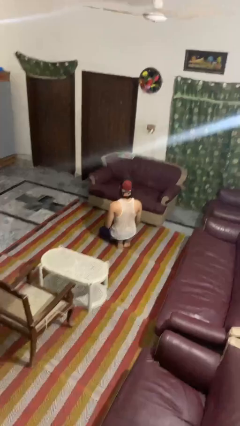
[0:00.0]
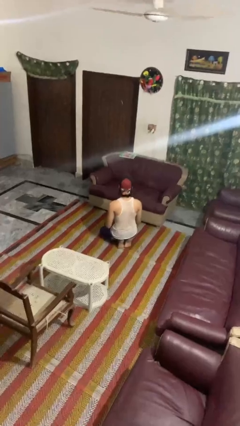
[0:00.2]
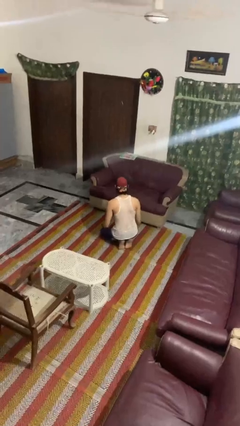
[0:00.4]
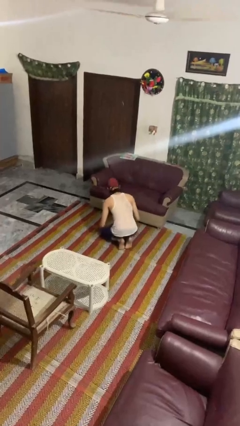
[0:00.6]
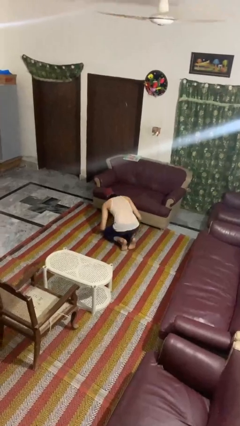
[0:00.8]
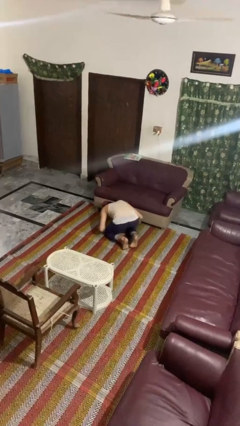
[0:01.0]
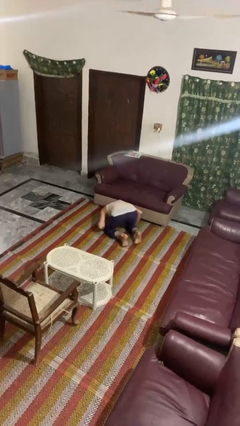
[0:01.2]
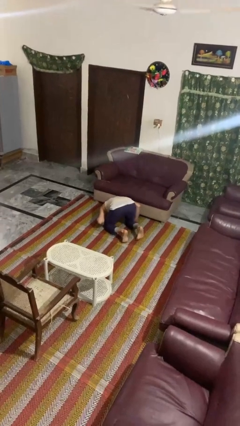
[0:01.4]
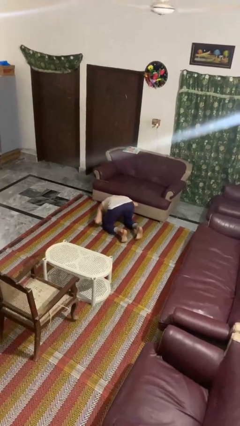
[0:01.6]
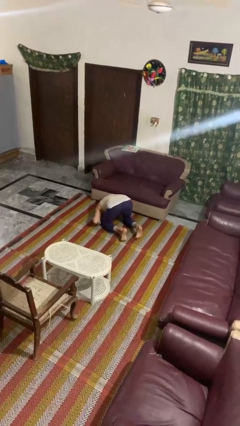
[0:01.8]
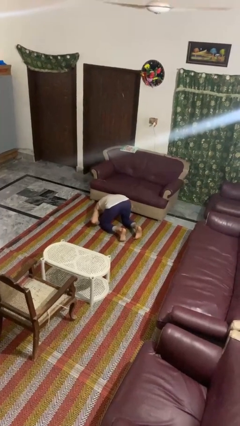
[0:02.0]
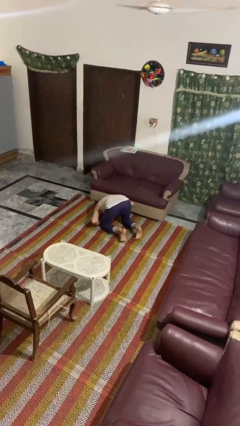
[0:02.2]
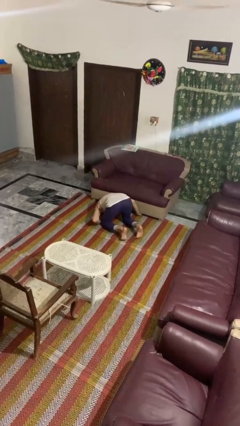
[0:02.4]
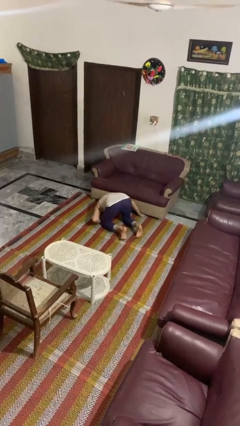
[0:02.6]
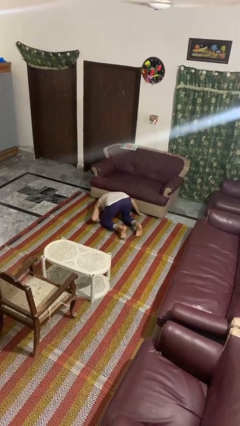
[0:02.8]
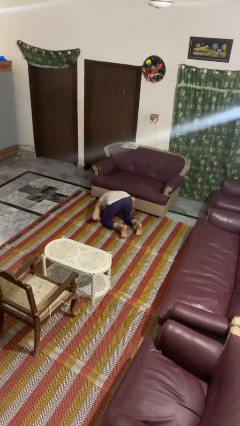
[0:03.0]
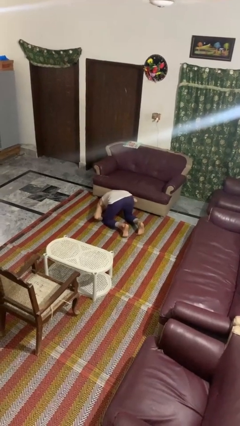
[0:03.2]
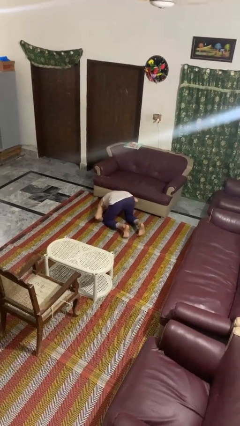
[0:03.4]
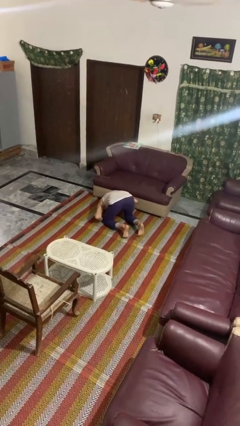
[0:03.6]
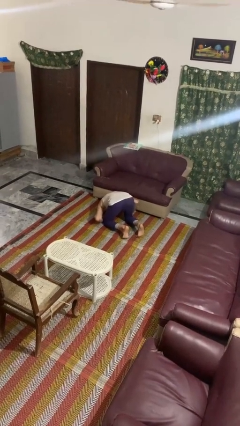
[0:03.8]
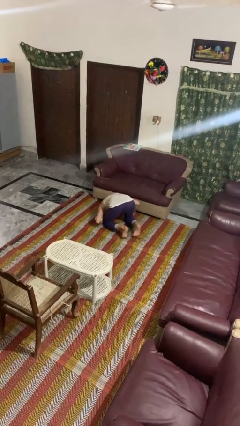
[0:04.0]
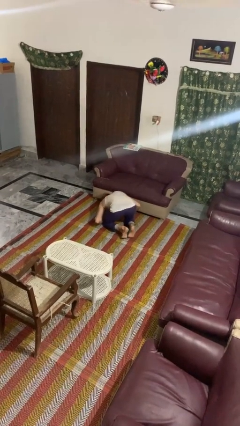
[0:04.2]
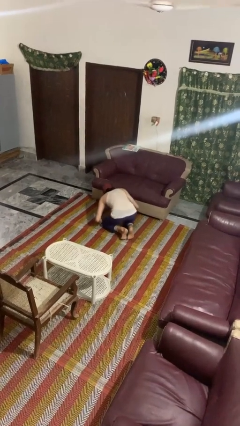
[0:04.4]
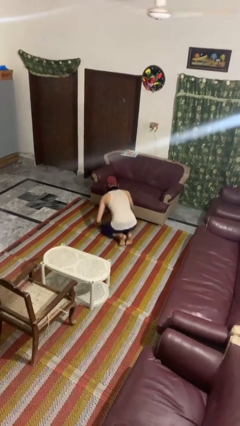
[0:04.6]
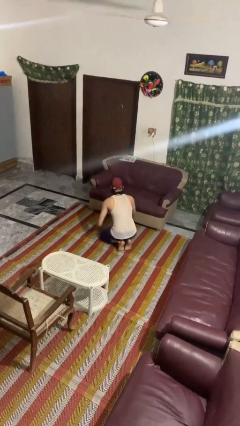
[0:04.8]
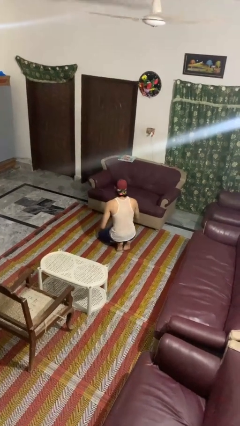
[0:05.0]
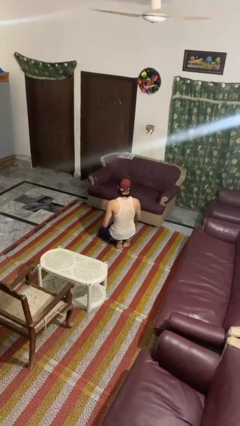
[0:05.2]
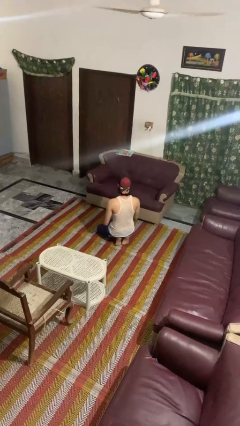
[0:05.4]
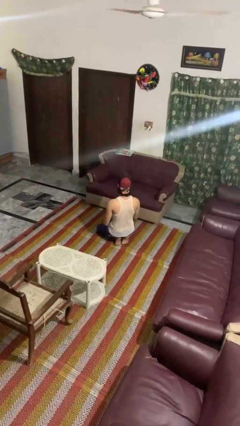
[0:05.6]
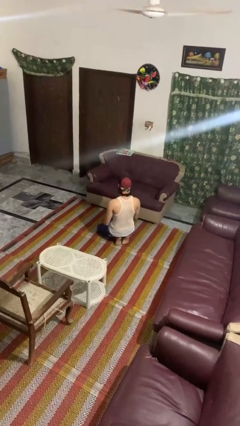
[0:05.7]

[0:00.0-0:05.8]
person searches under couch

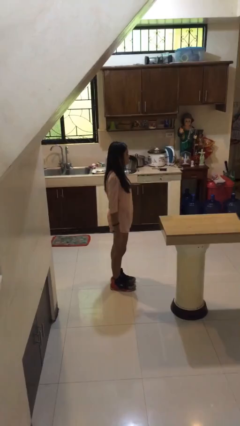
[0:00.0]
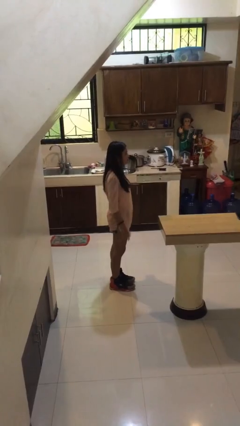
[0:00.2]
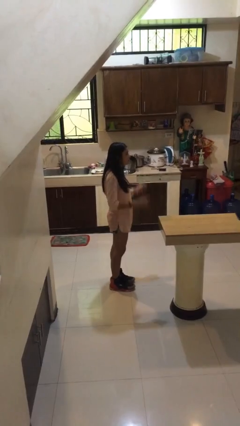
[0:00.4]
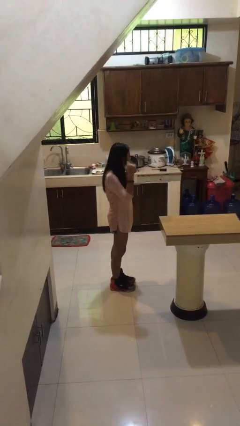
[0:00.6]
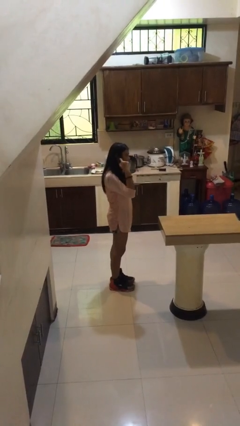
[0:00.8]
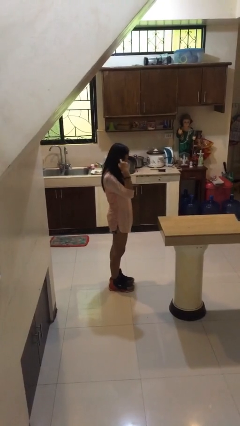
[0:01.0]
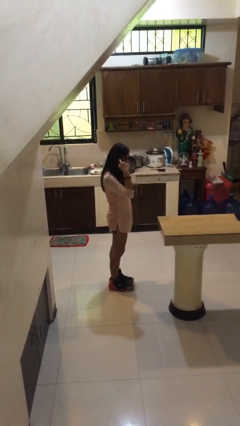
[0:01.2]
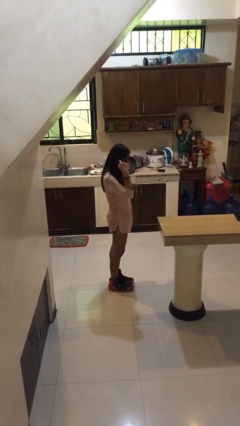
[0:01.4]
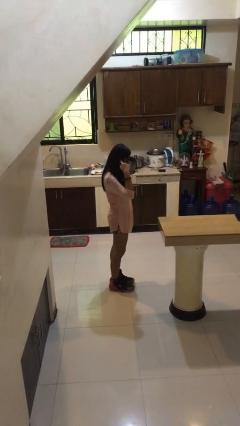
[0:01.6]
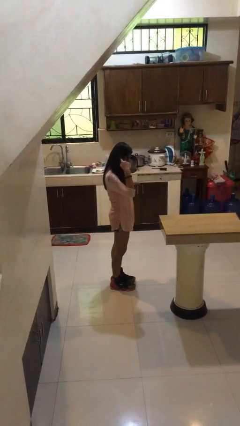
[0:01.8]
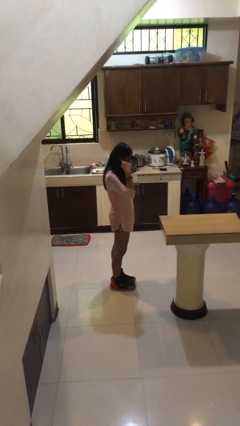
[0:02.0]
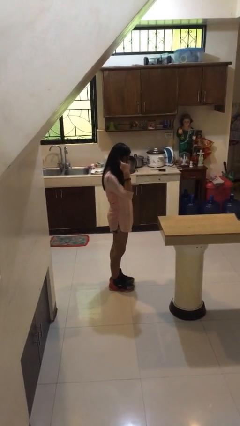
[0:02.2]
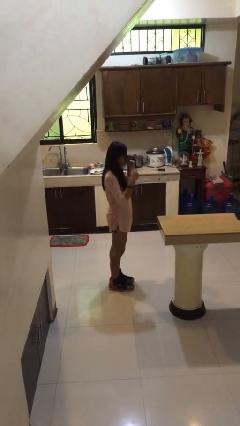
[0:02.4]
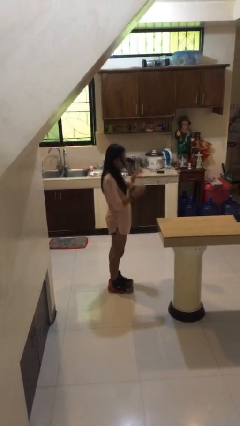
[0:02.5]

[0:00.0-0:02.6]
person puts fingers in ear

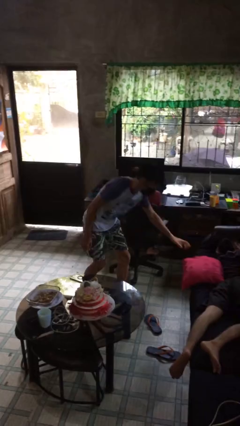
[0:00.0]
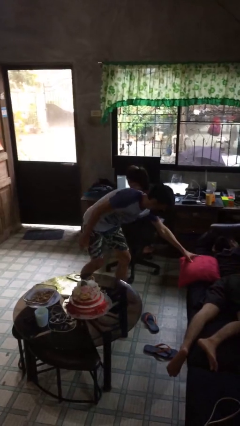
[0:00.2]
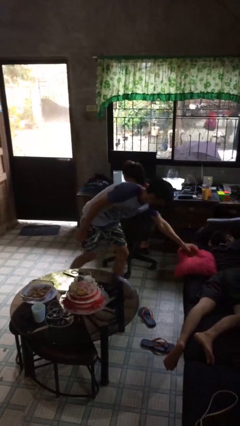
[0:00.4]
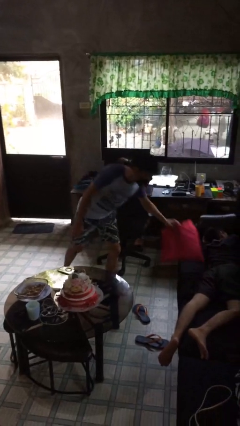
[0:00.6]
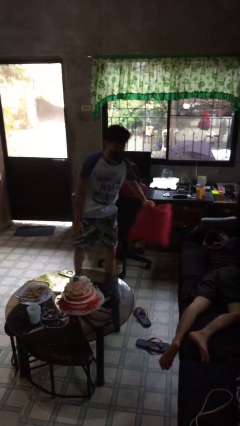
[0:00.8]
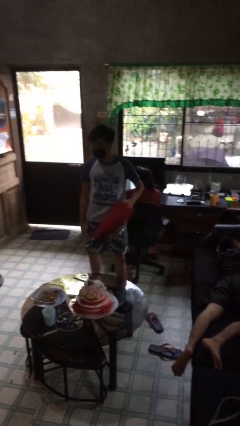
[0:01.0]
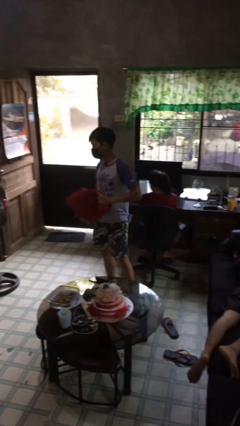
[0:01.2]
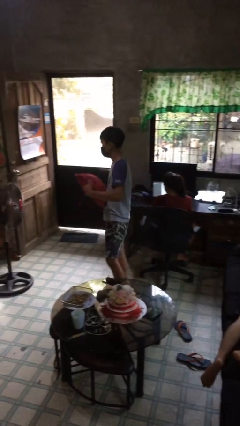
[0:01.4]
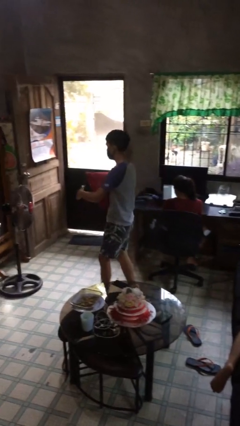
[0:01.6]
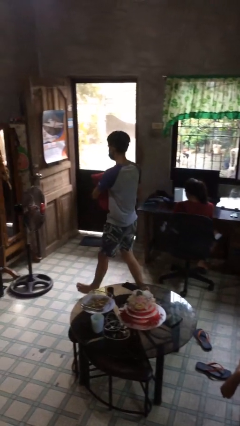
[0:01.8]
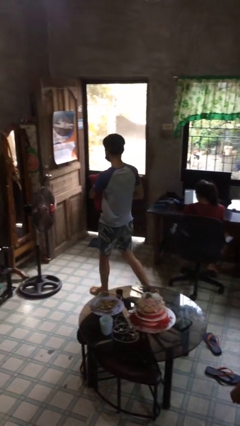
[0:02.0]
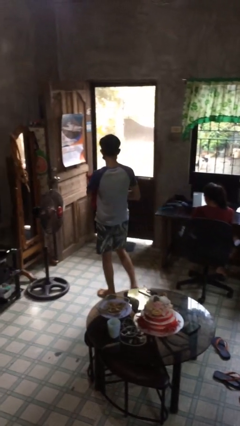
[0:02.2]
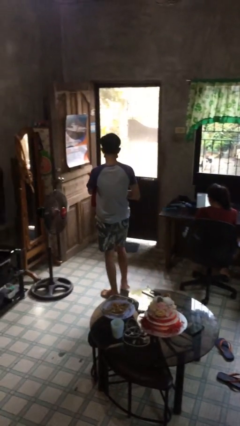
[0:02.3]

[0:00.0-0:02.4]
person steals object from person

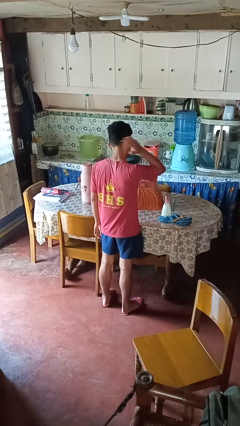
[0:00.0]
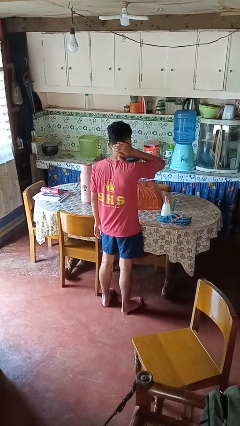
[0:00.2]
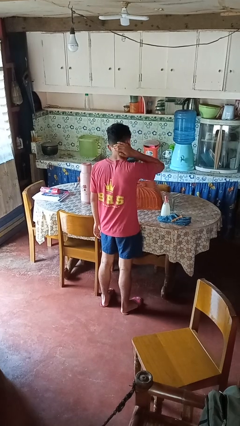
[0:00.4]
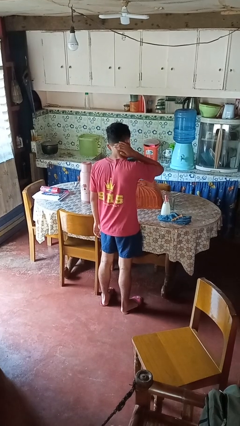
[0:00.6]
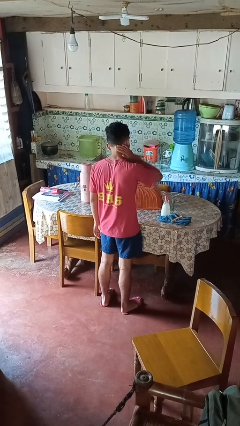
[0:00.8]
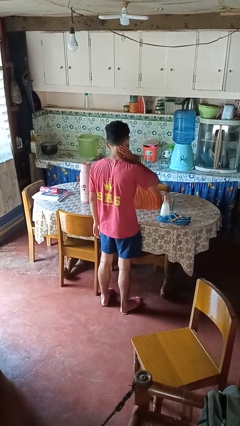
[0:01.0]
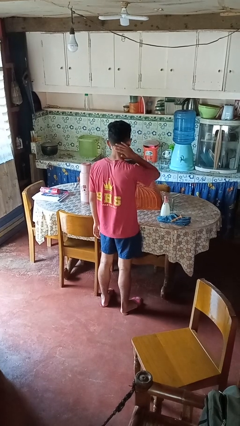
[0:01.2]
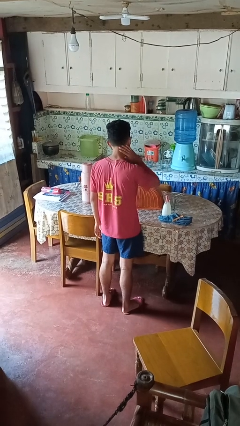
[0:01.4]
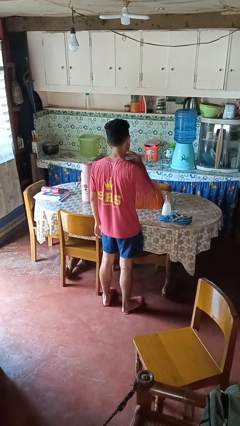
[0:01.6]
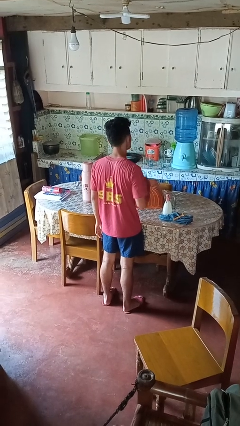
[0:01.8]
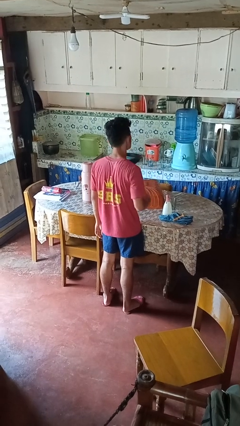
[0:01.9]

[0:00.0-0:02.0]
person swats bug

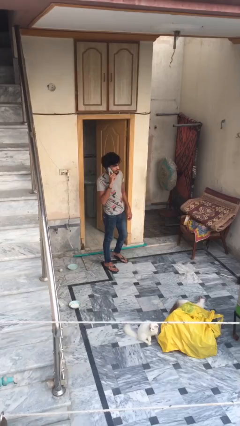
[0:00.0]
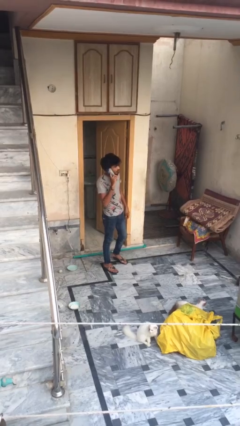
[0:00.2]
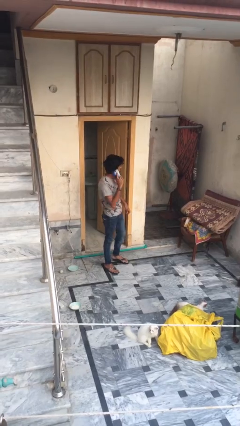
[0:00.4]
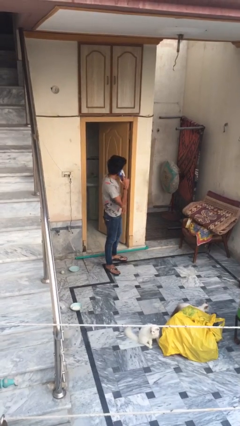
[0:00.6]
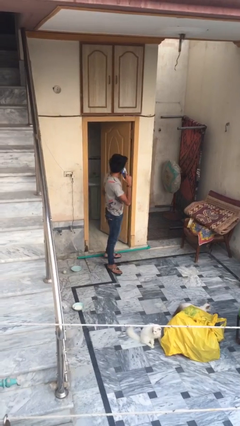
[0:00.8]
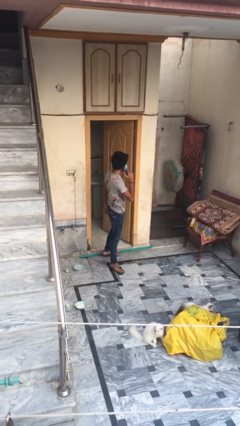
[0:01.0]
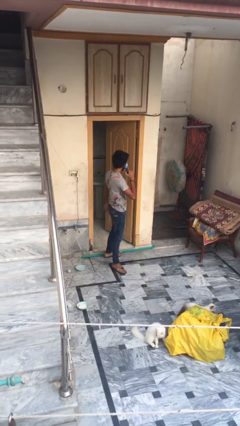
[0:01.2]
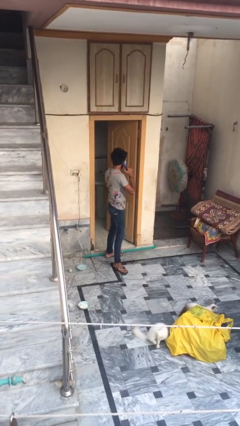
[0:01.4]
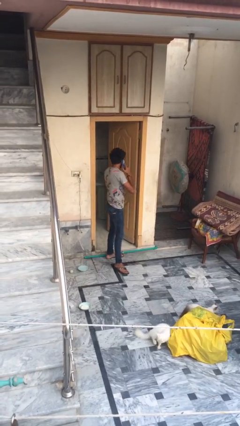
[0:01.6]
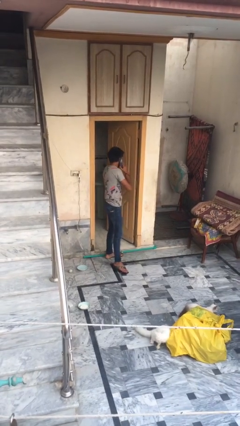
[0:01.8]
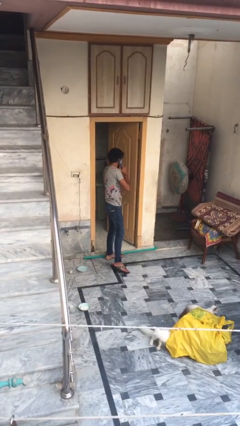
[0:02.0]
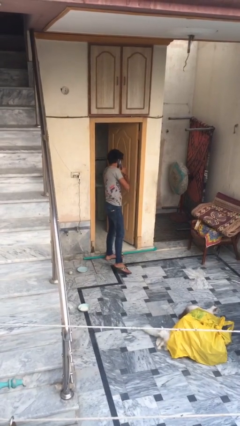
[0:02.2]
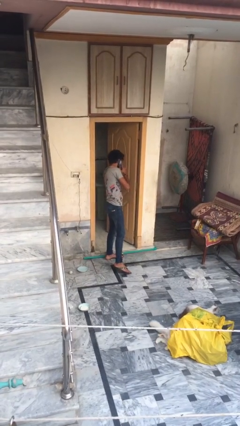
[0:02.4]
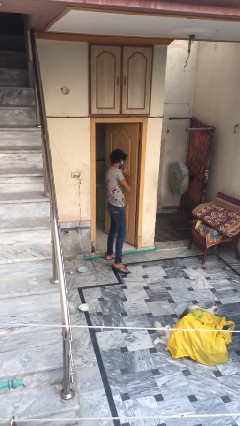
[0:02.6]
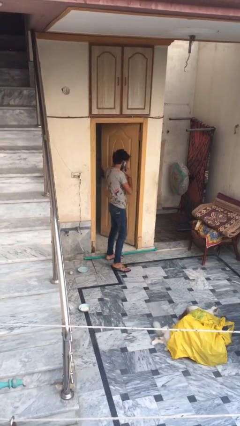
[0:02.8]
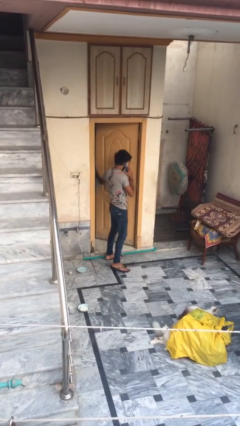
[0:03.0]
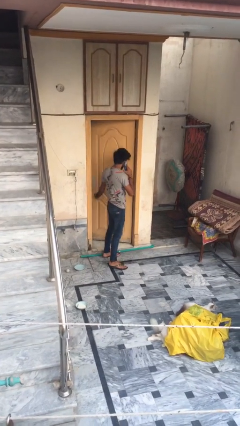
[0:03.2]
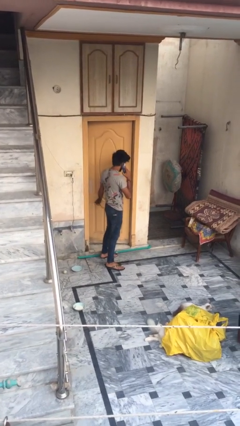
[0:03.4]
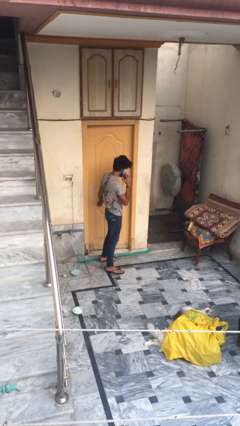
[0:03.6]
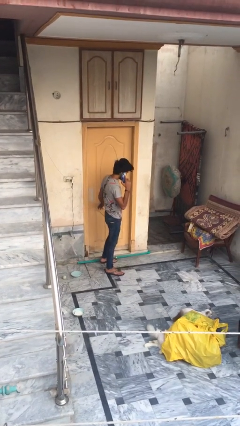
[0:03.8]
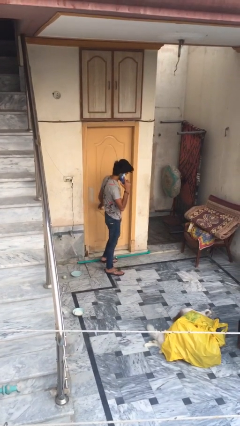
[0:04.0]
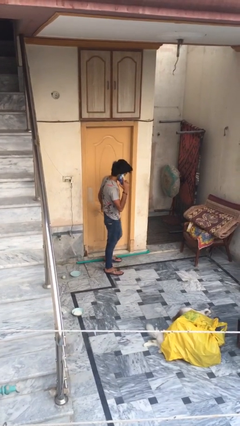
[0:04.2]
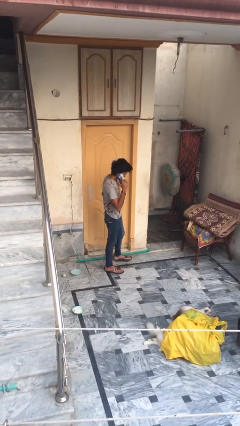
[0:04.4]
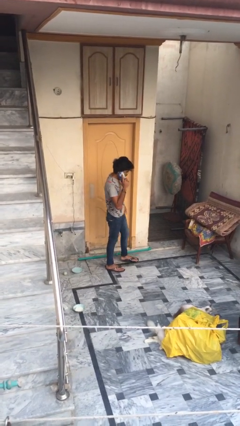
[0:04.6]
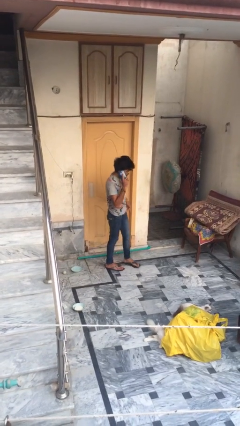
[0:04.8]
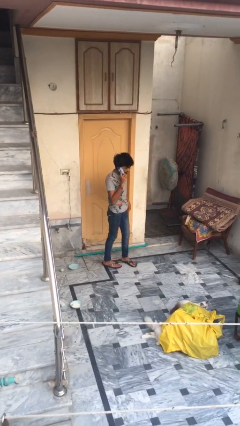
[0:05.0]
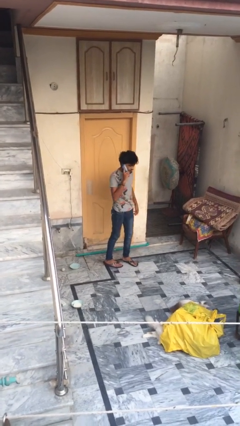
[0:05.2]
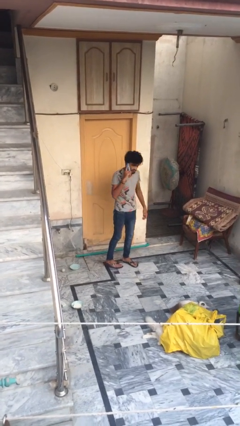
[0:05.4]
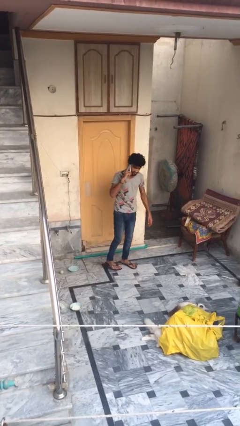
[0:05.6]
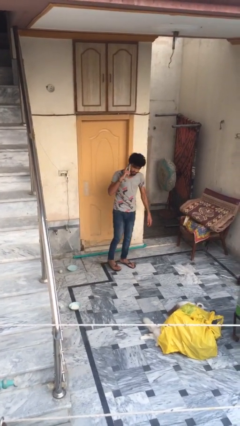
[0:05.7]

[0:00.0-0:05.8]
person closes facility door
